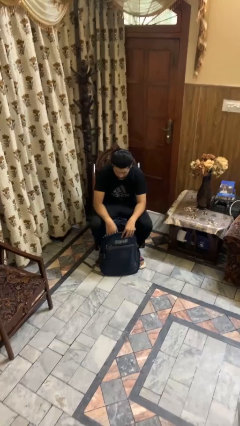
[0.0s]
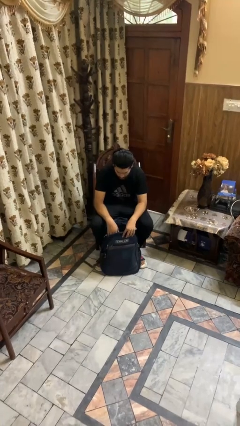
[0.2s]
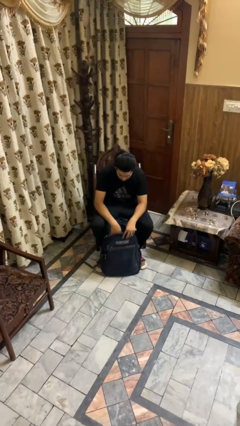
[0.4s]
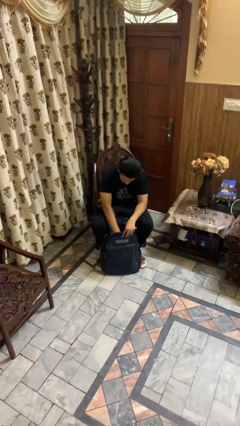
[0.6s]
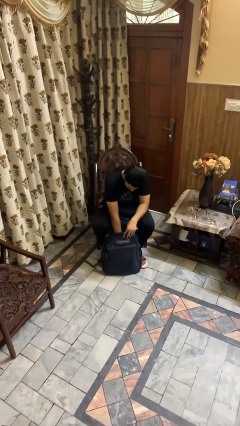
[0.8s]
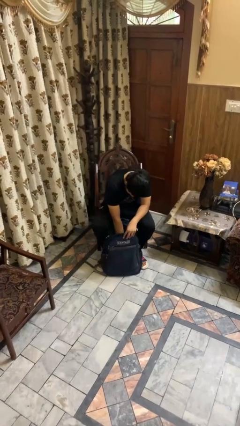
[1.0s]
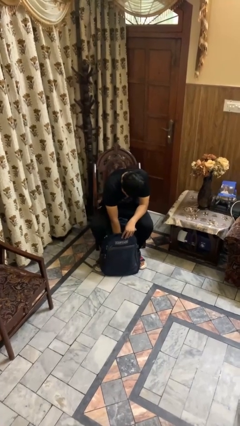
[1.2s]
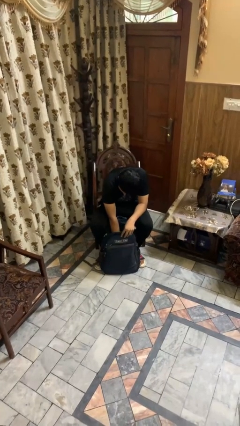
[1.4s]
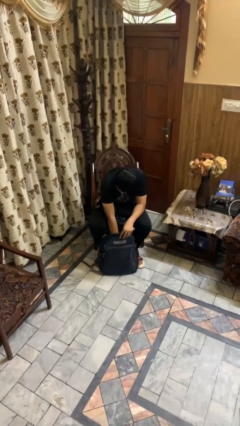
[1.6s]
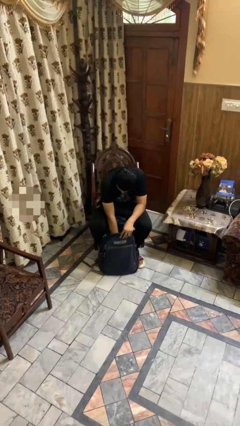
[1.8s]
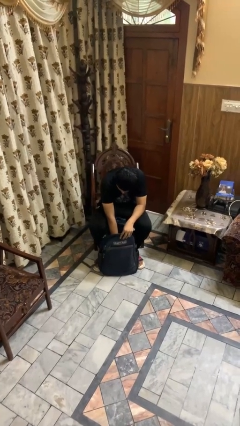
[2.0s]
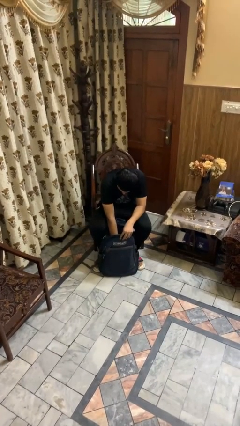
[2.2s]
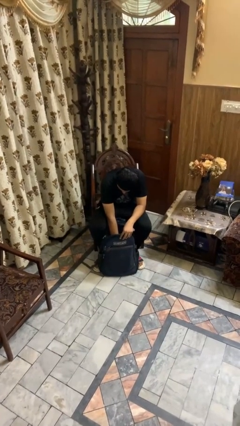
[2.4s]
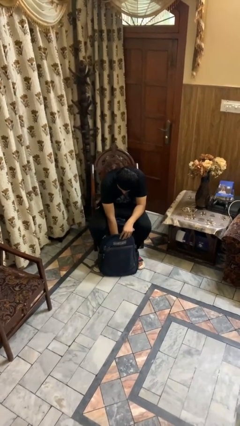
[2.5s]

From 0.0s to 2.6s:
person searches in backpack

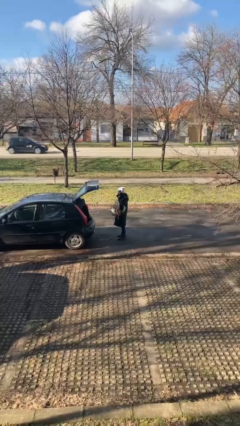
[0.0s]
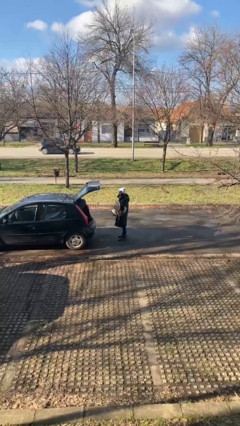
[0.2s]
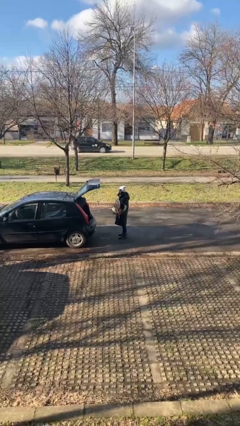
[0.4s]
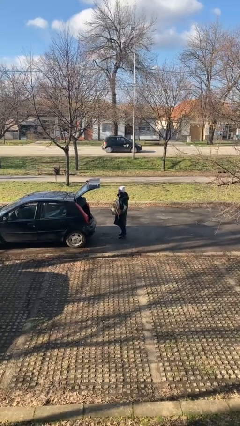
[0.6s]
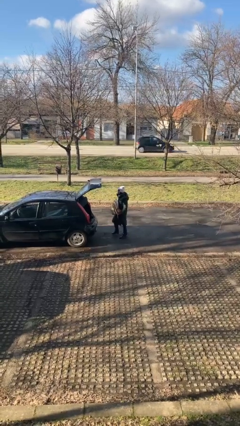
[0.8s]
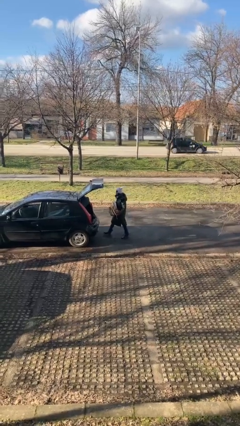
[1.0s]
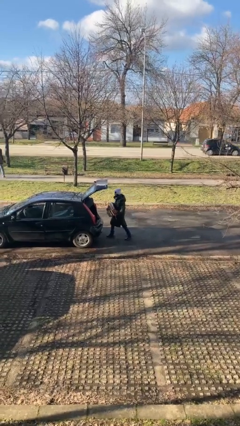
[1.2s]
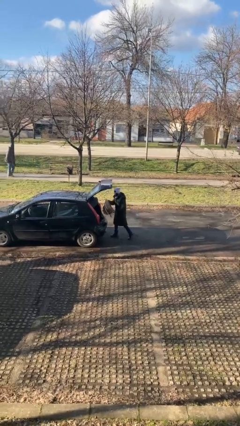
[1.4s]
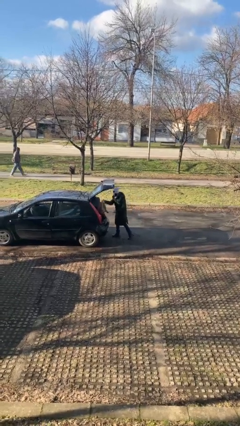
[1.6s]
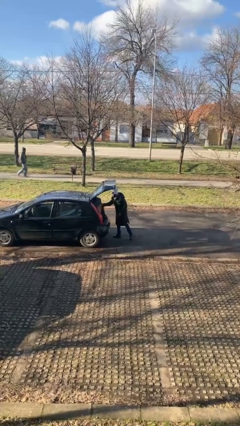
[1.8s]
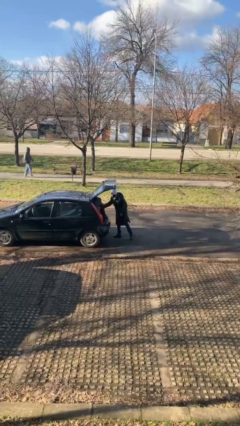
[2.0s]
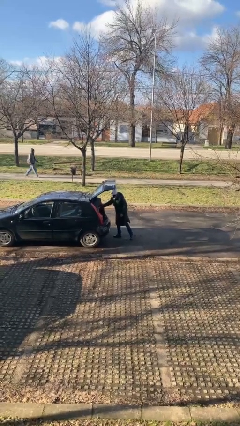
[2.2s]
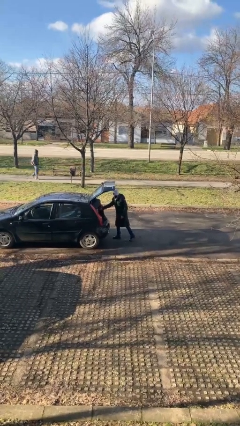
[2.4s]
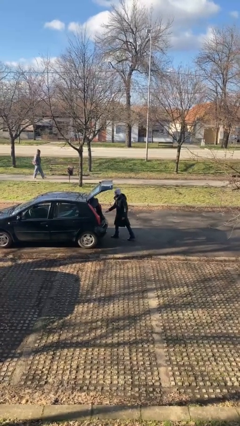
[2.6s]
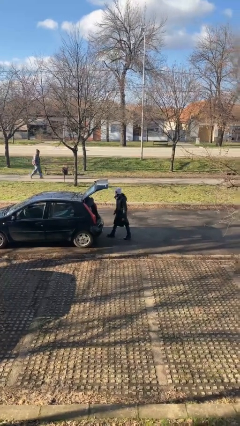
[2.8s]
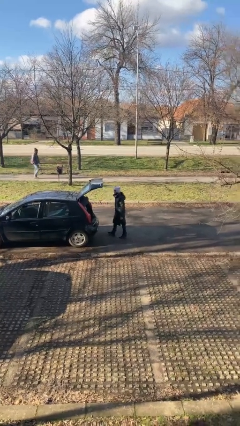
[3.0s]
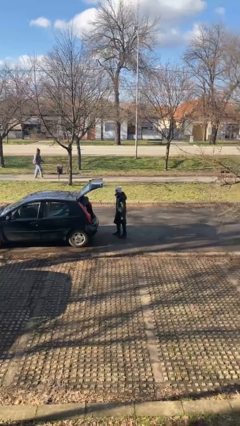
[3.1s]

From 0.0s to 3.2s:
person loads car

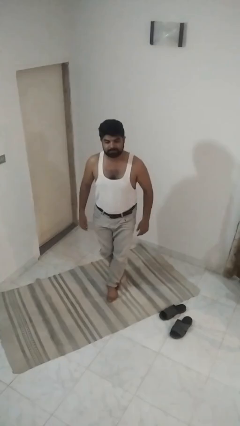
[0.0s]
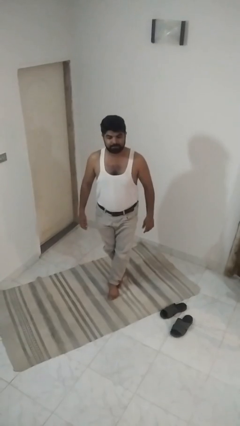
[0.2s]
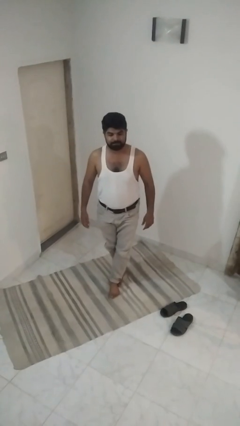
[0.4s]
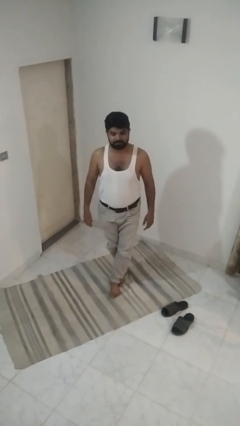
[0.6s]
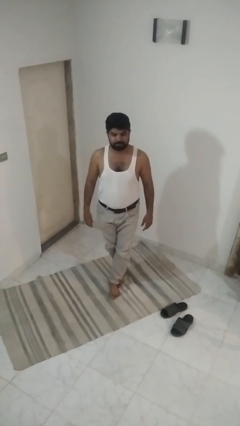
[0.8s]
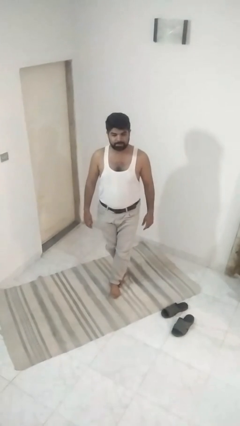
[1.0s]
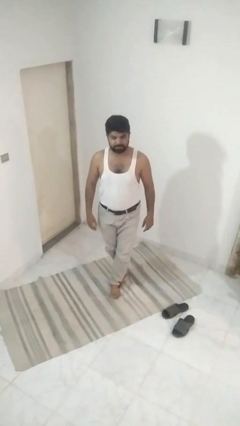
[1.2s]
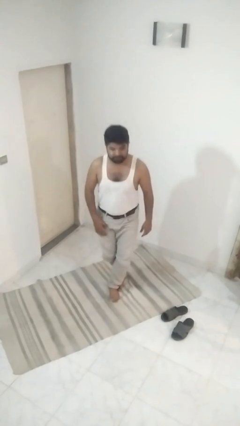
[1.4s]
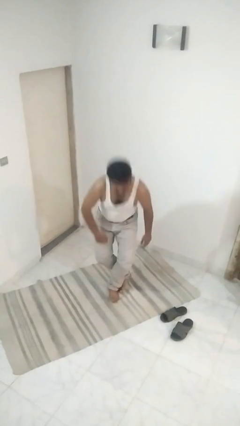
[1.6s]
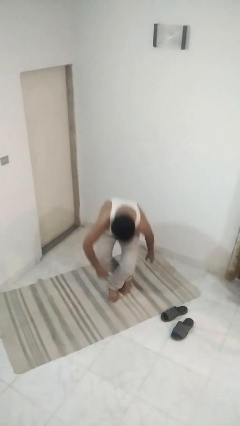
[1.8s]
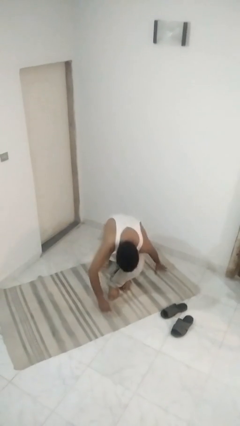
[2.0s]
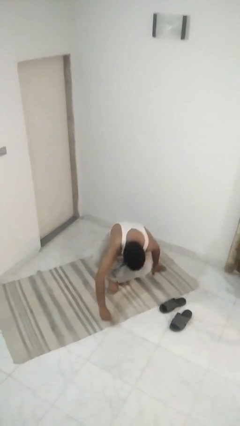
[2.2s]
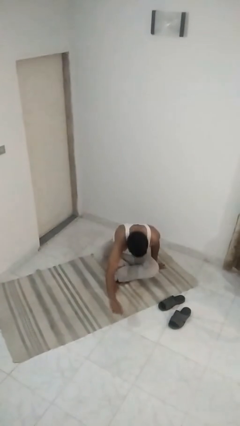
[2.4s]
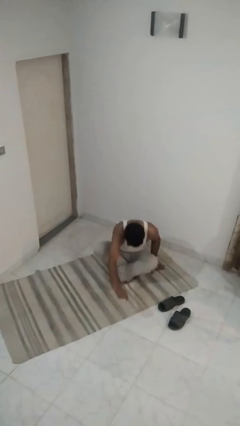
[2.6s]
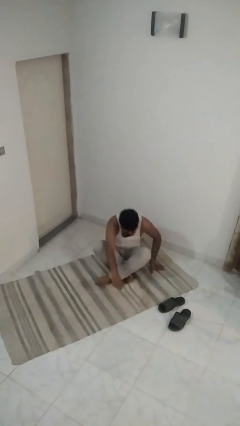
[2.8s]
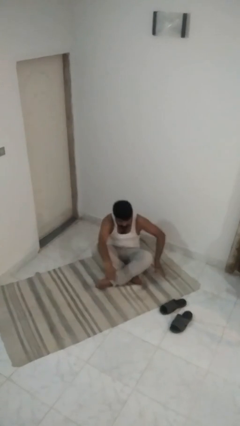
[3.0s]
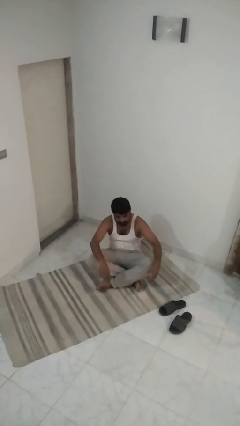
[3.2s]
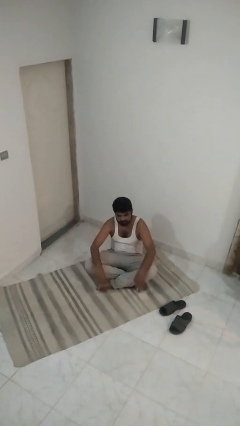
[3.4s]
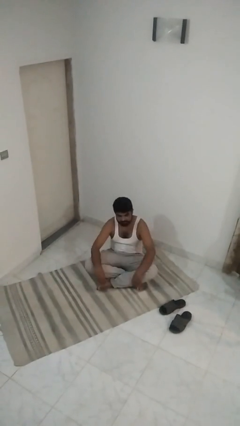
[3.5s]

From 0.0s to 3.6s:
person sits crisscross

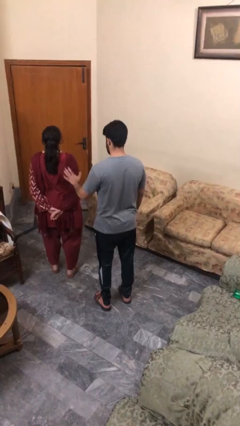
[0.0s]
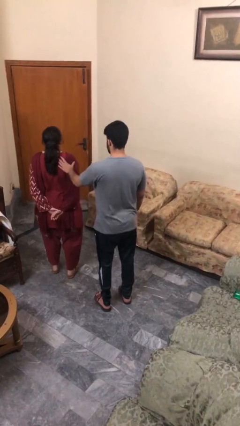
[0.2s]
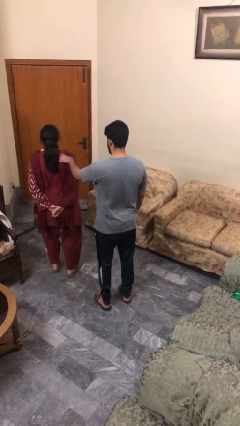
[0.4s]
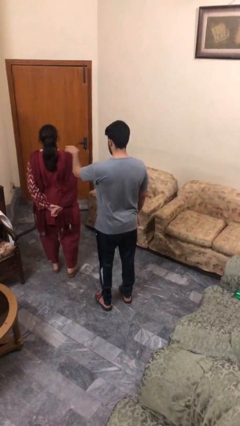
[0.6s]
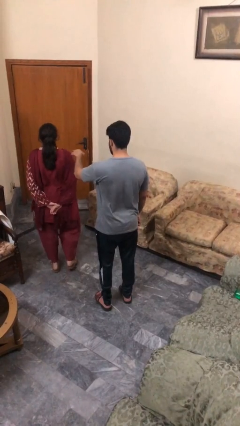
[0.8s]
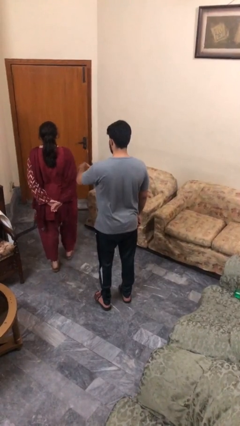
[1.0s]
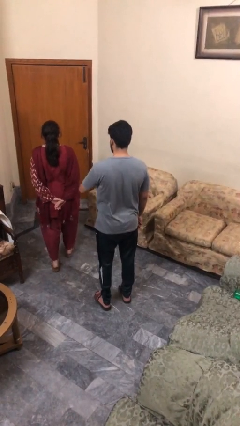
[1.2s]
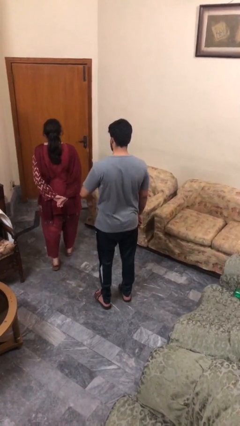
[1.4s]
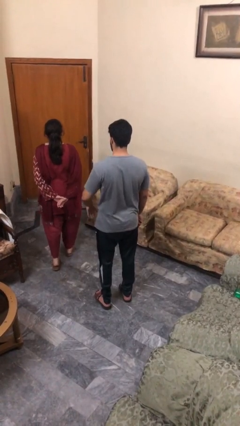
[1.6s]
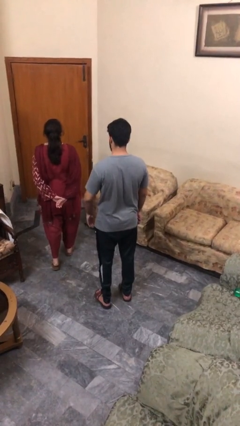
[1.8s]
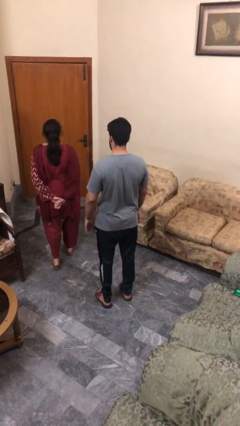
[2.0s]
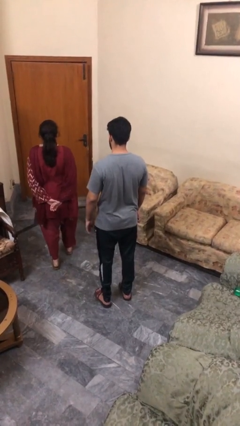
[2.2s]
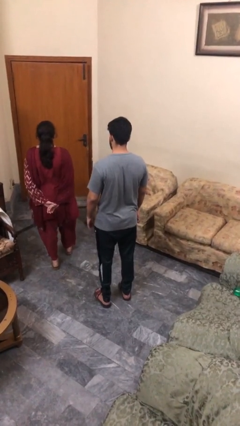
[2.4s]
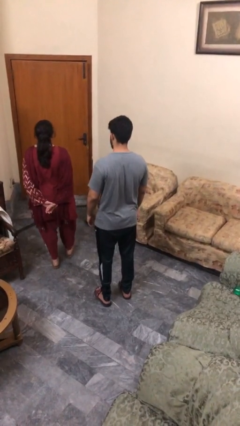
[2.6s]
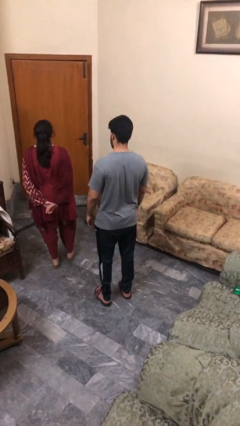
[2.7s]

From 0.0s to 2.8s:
person shoves person

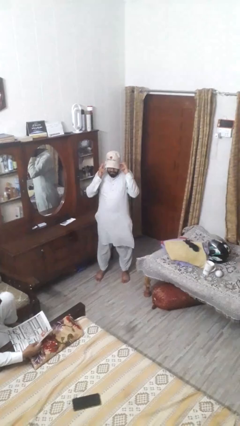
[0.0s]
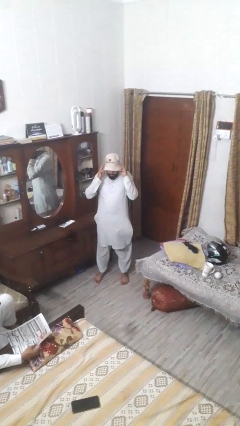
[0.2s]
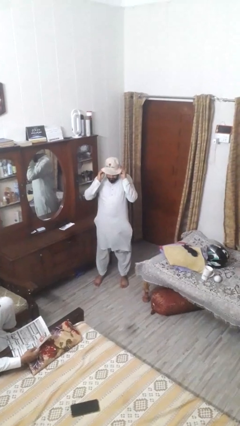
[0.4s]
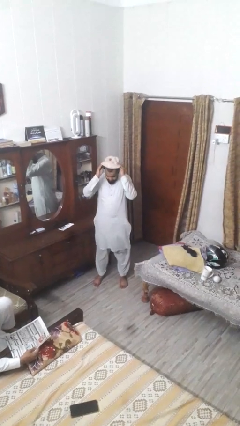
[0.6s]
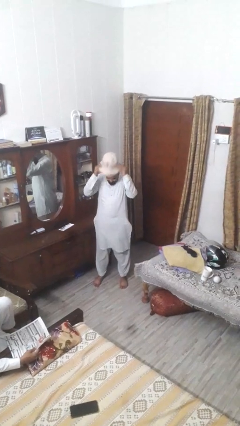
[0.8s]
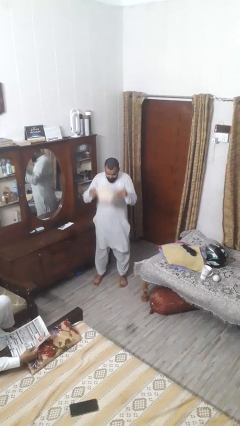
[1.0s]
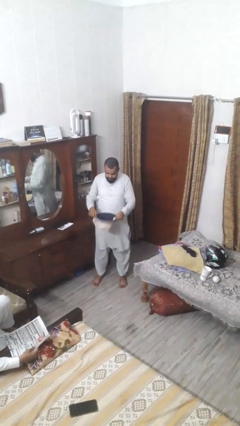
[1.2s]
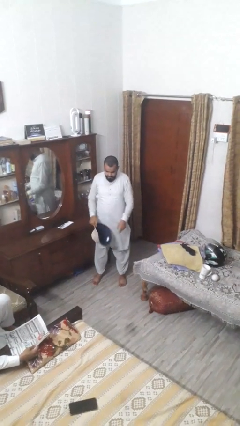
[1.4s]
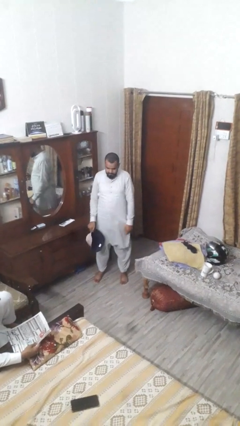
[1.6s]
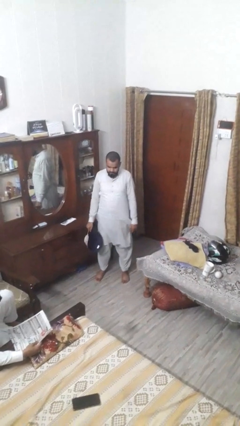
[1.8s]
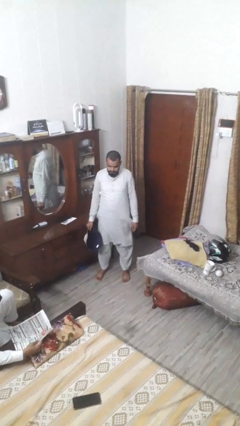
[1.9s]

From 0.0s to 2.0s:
person takes off hat

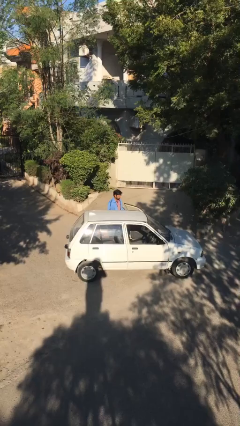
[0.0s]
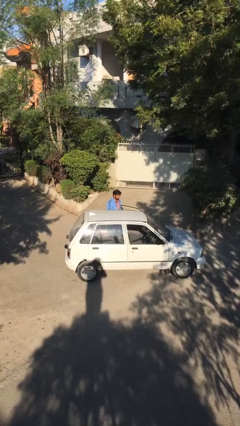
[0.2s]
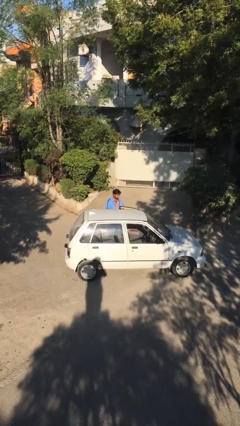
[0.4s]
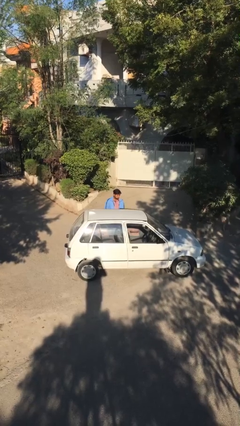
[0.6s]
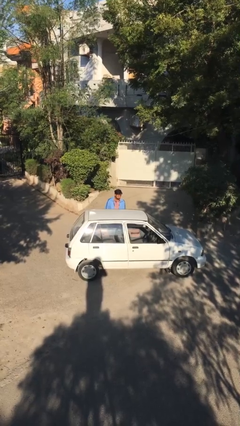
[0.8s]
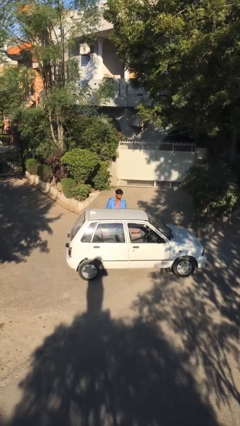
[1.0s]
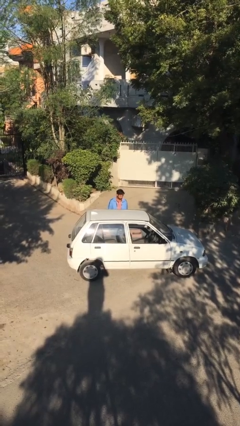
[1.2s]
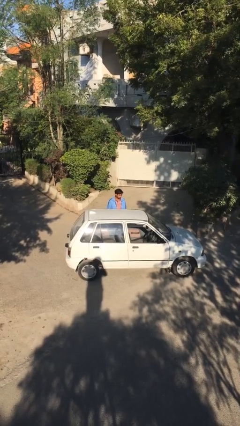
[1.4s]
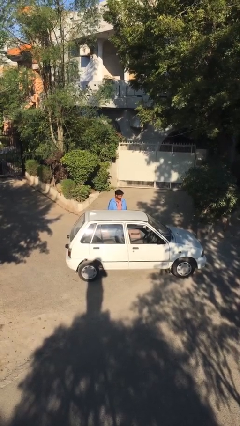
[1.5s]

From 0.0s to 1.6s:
person closes car door

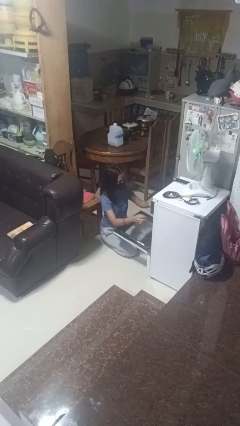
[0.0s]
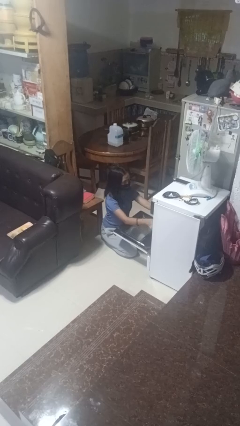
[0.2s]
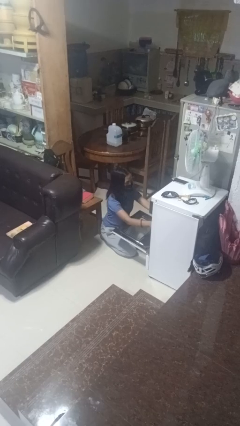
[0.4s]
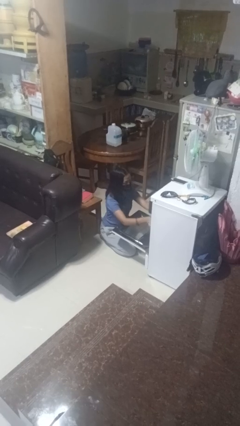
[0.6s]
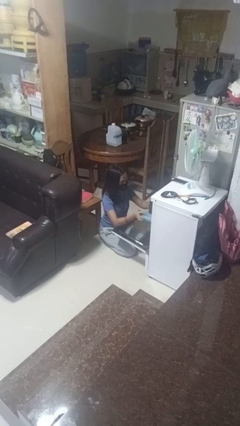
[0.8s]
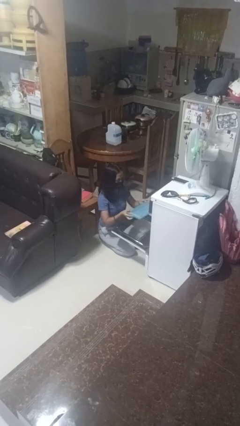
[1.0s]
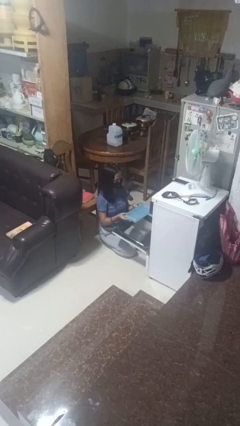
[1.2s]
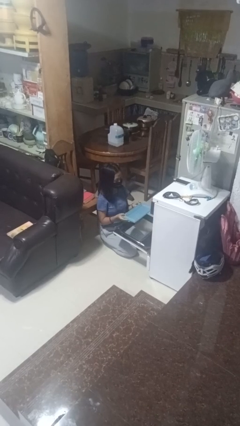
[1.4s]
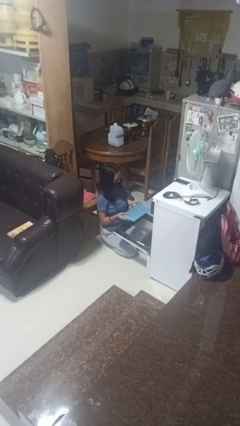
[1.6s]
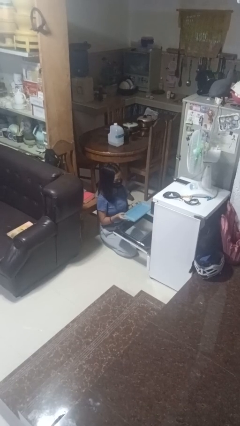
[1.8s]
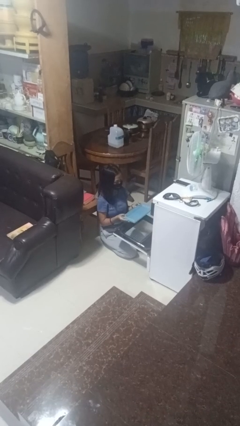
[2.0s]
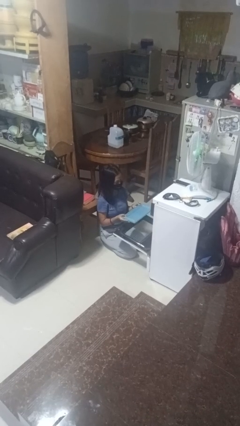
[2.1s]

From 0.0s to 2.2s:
person takes object from oven
